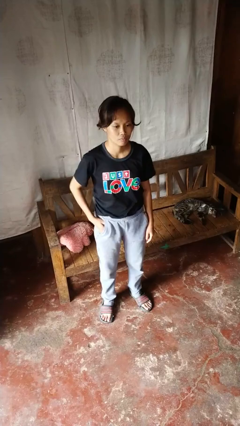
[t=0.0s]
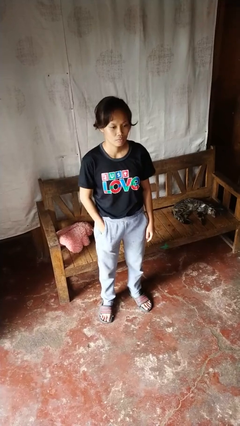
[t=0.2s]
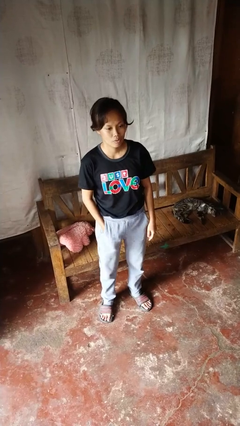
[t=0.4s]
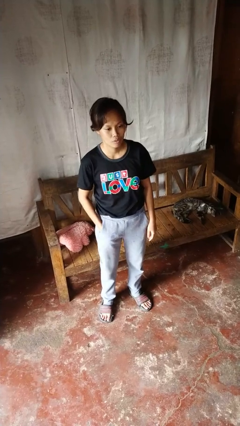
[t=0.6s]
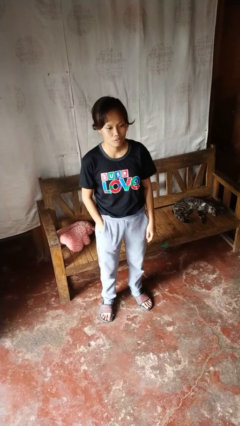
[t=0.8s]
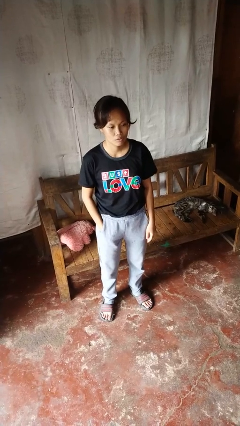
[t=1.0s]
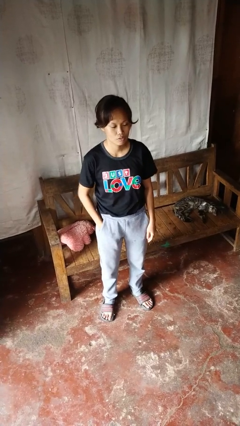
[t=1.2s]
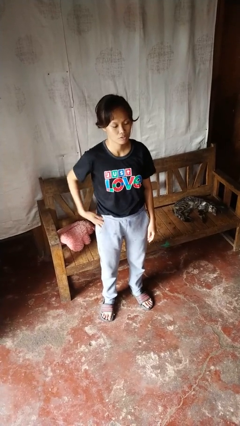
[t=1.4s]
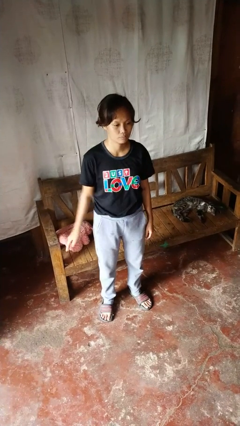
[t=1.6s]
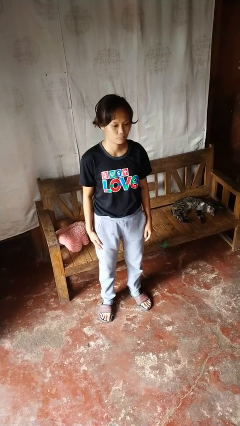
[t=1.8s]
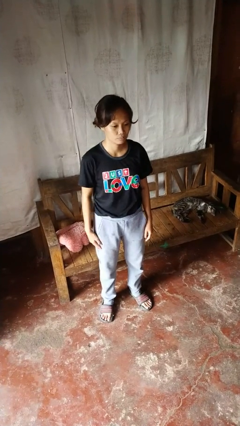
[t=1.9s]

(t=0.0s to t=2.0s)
person puts hands in back pockets

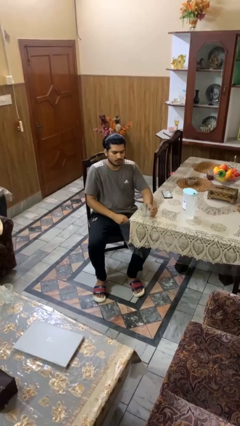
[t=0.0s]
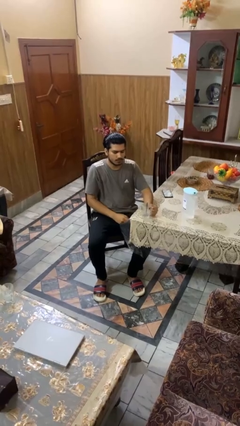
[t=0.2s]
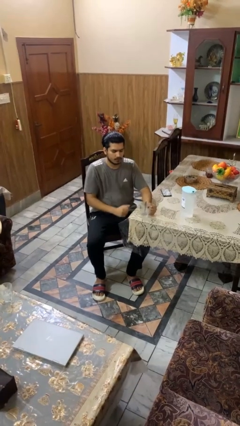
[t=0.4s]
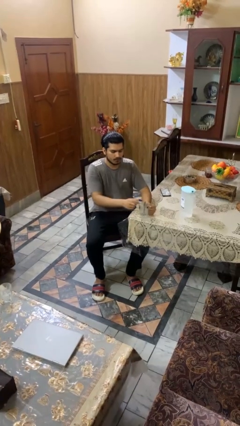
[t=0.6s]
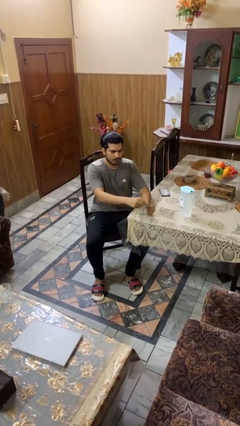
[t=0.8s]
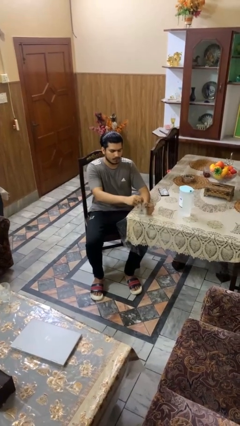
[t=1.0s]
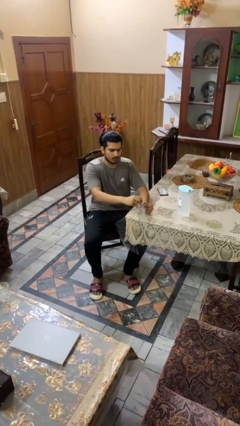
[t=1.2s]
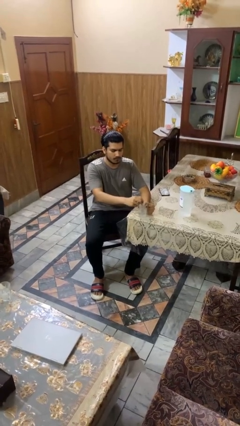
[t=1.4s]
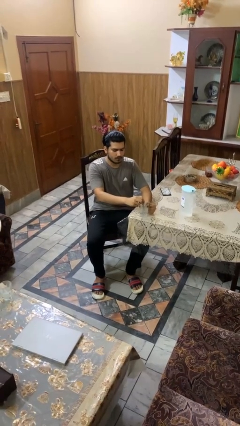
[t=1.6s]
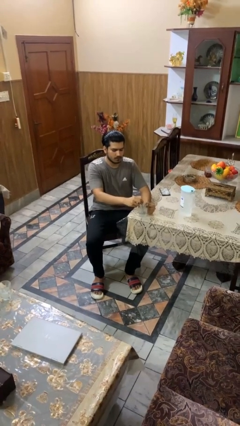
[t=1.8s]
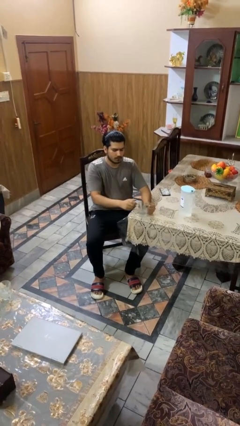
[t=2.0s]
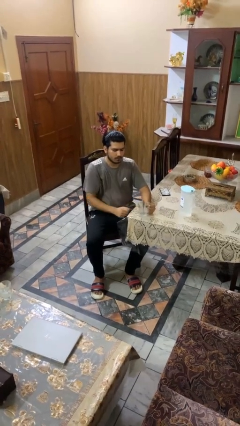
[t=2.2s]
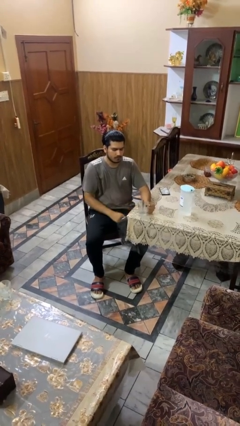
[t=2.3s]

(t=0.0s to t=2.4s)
person stirs mug

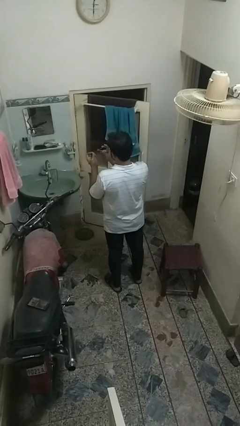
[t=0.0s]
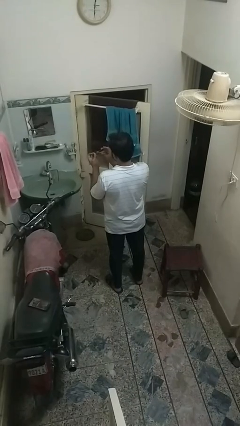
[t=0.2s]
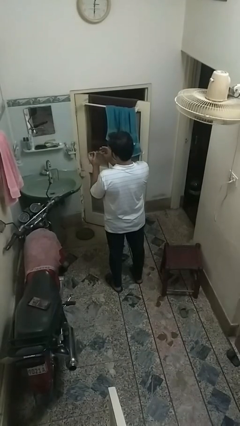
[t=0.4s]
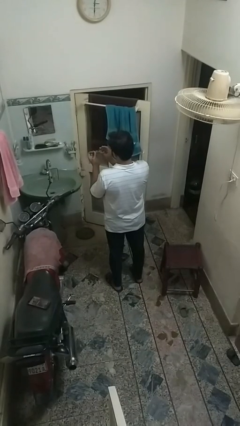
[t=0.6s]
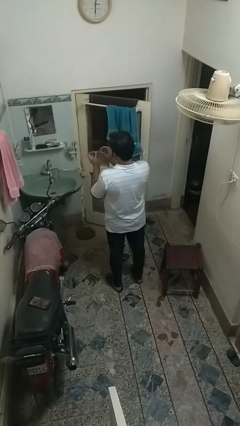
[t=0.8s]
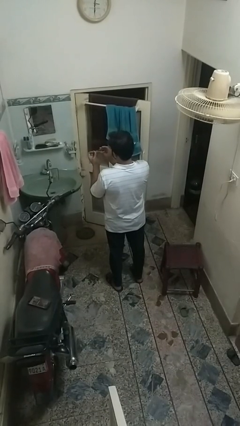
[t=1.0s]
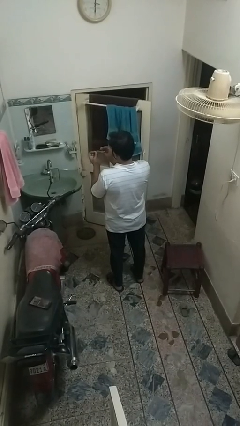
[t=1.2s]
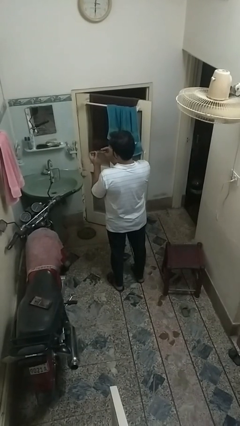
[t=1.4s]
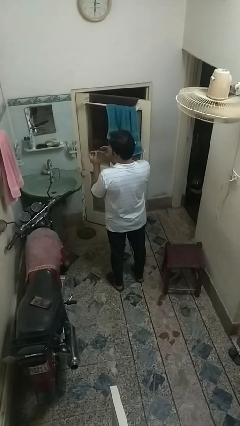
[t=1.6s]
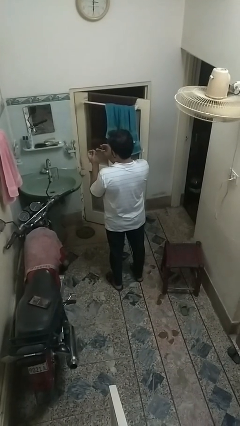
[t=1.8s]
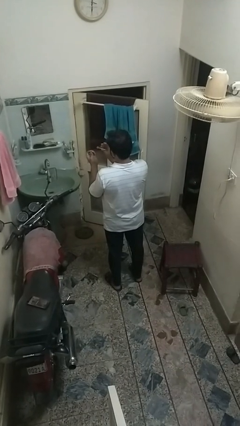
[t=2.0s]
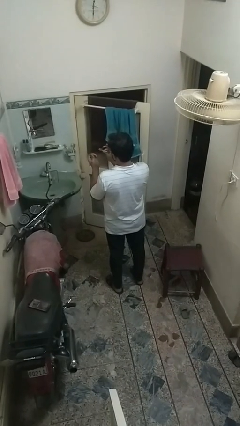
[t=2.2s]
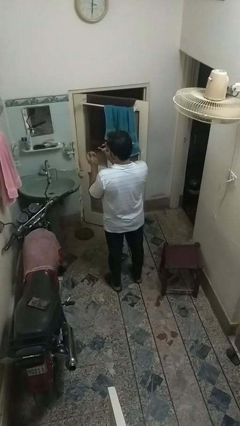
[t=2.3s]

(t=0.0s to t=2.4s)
person clips fingernails

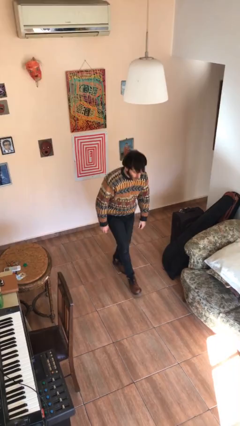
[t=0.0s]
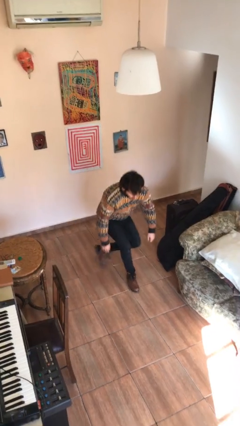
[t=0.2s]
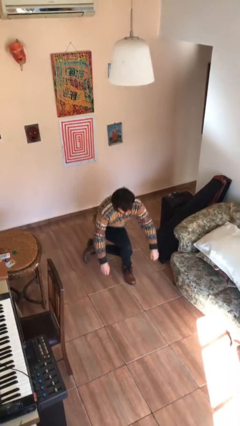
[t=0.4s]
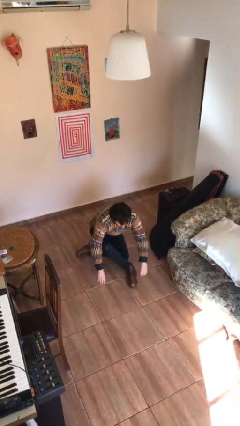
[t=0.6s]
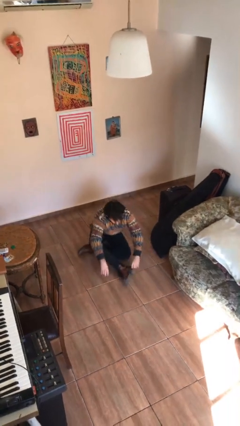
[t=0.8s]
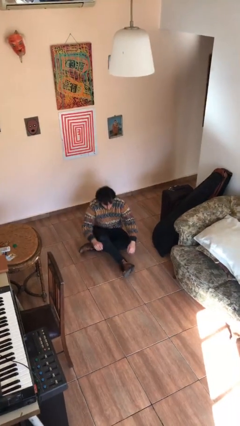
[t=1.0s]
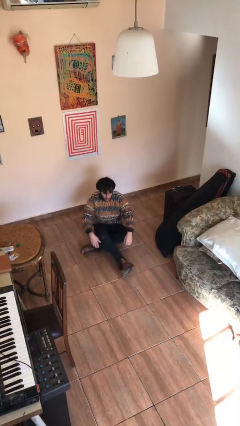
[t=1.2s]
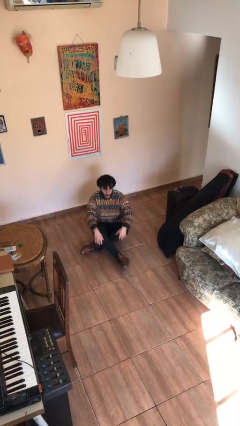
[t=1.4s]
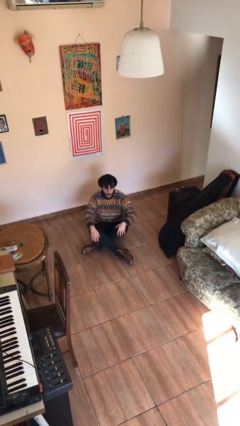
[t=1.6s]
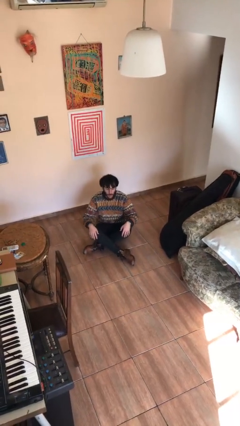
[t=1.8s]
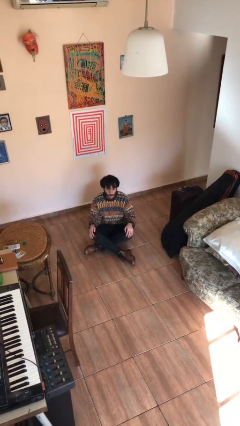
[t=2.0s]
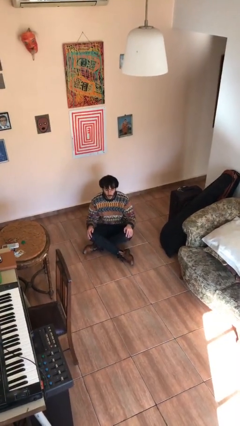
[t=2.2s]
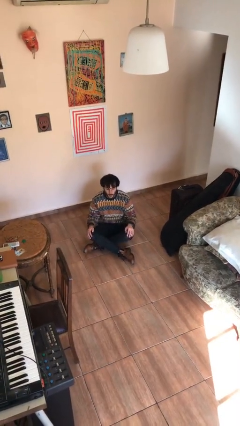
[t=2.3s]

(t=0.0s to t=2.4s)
person sits crisscross

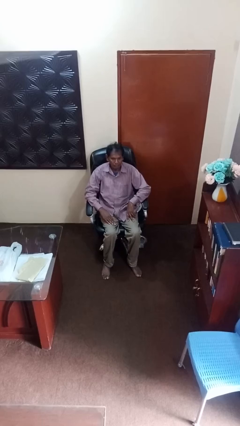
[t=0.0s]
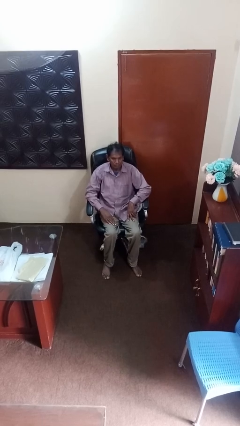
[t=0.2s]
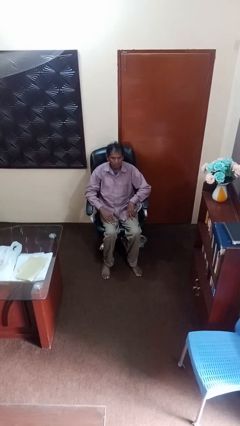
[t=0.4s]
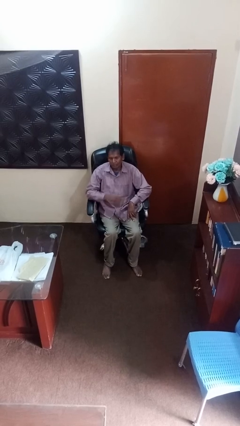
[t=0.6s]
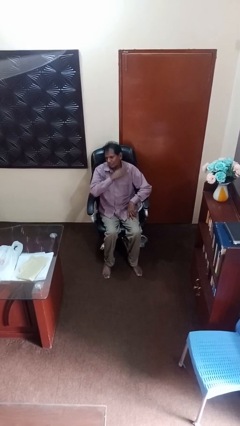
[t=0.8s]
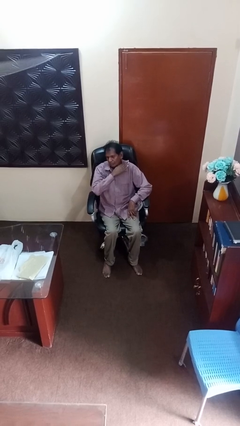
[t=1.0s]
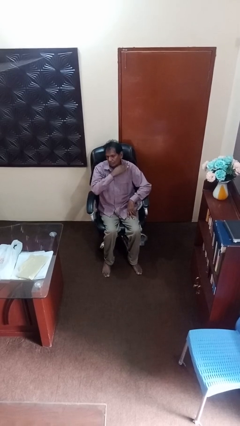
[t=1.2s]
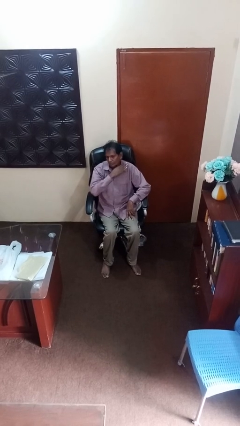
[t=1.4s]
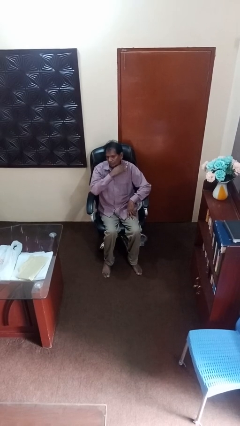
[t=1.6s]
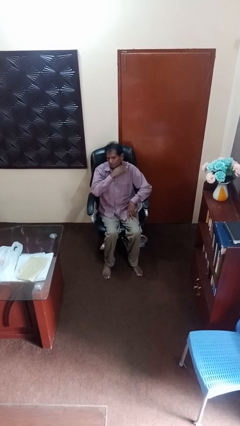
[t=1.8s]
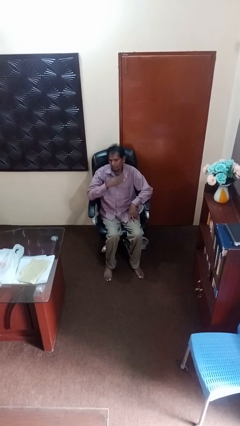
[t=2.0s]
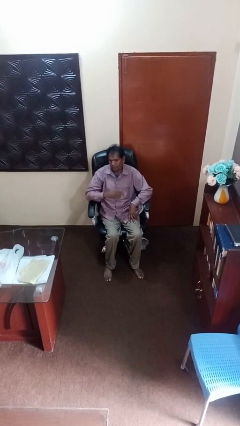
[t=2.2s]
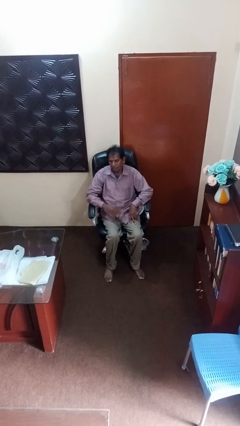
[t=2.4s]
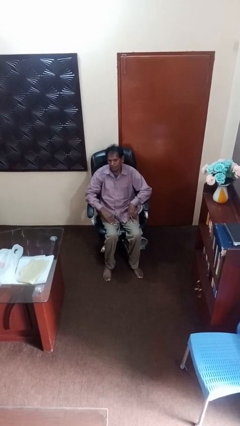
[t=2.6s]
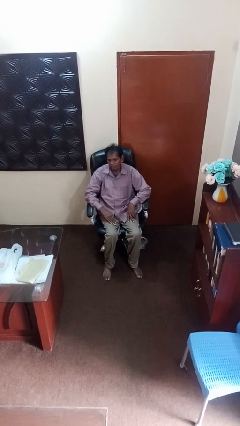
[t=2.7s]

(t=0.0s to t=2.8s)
person gestures cut

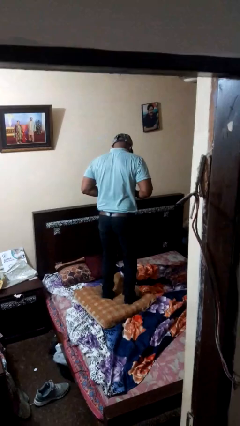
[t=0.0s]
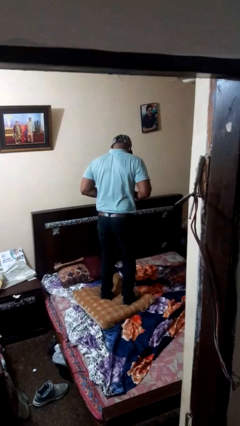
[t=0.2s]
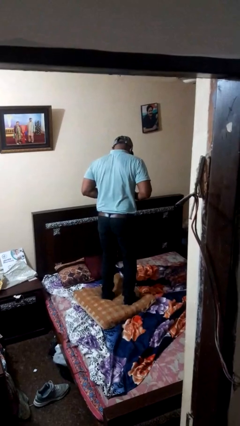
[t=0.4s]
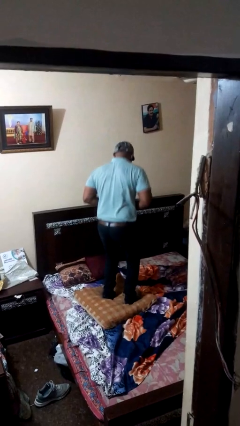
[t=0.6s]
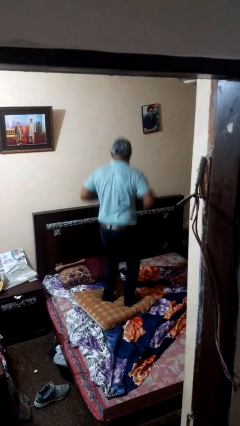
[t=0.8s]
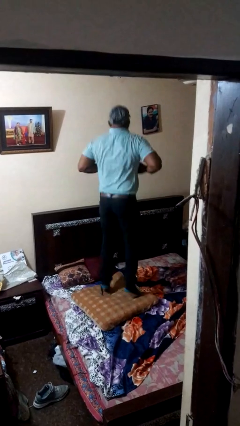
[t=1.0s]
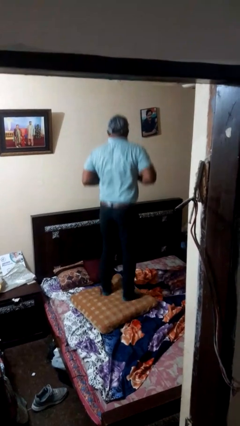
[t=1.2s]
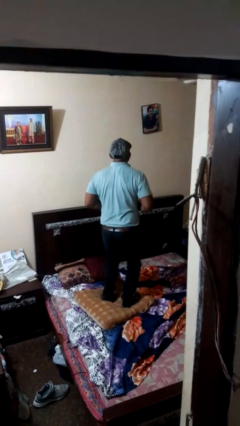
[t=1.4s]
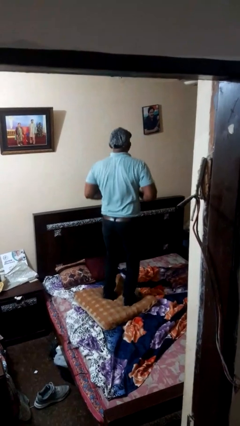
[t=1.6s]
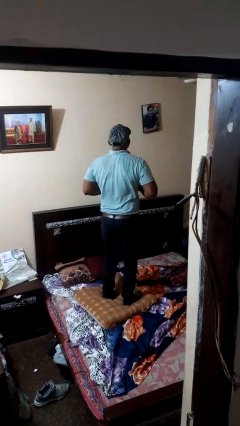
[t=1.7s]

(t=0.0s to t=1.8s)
person jumps on bed

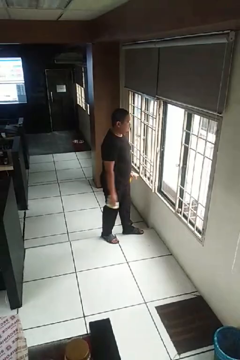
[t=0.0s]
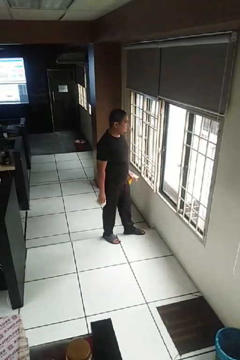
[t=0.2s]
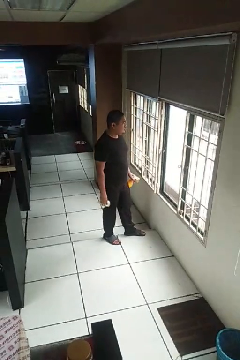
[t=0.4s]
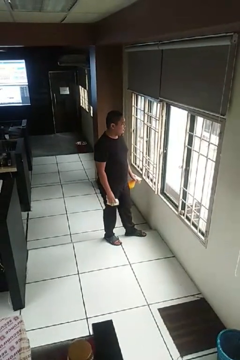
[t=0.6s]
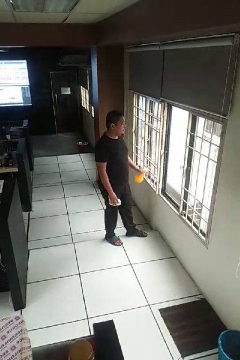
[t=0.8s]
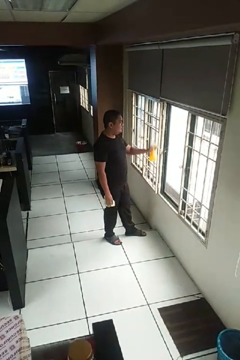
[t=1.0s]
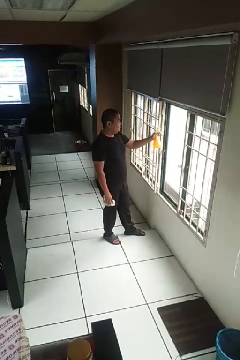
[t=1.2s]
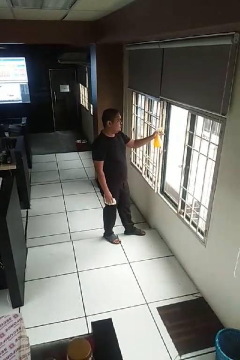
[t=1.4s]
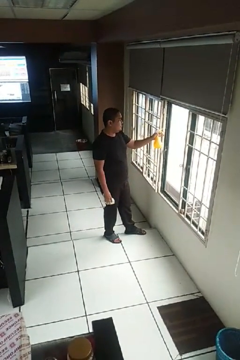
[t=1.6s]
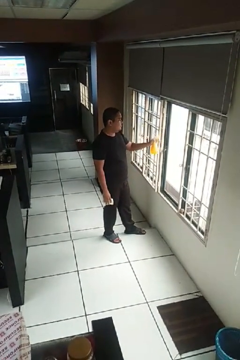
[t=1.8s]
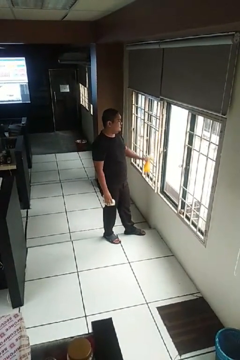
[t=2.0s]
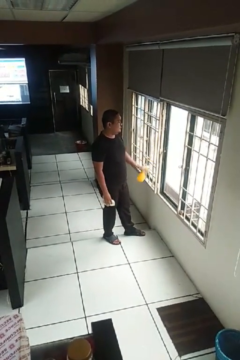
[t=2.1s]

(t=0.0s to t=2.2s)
person sprays from bottle

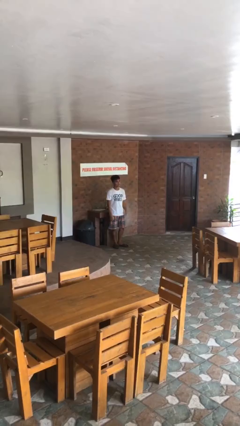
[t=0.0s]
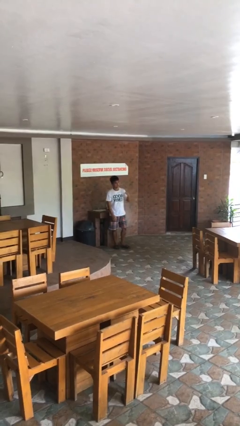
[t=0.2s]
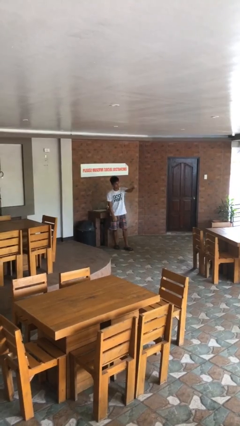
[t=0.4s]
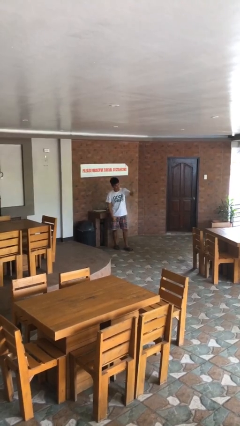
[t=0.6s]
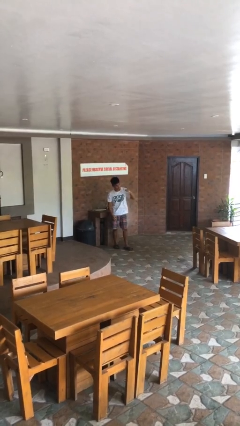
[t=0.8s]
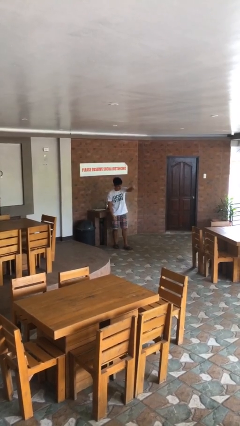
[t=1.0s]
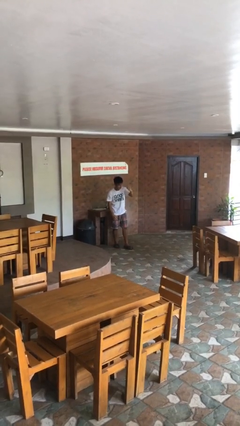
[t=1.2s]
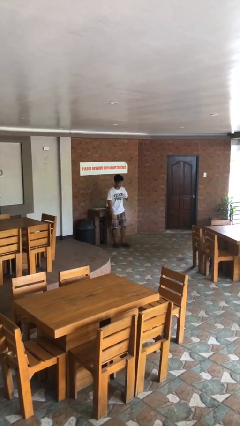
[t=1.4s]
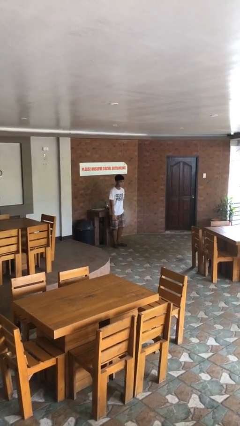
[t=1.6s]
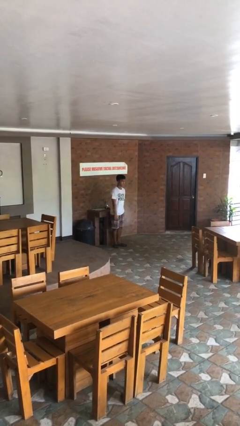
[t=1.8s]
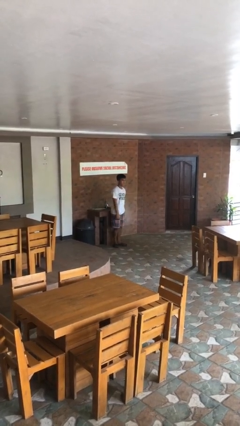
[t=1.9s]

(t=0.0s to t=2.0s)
person punches
